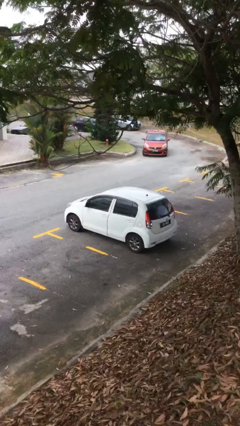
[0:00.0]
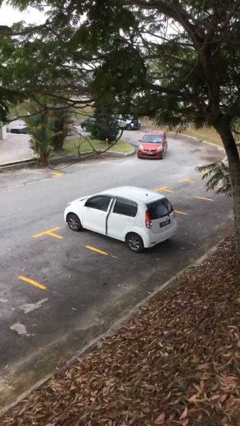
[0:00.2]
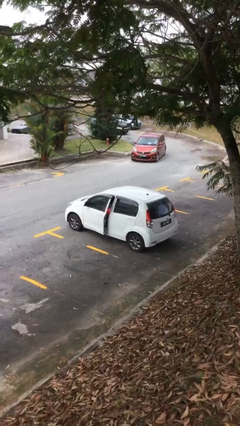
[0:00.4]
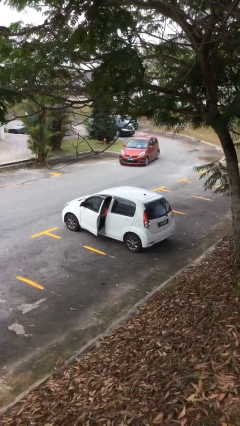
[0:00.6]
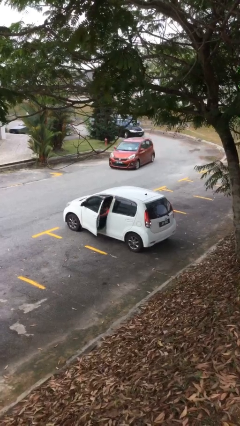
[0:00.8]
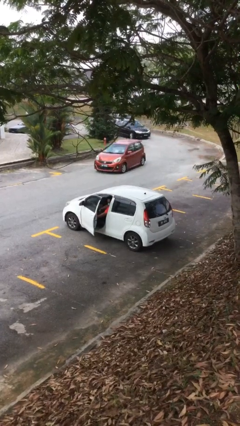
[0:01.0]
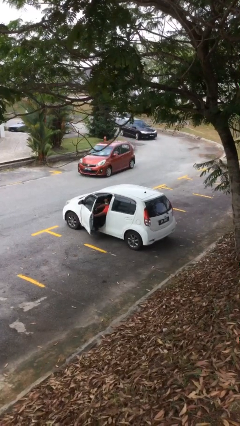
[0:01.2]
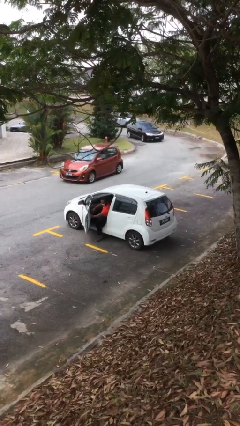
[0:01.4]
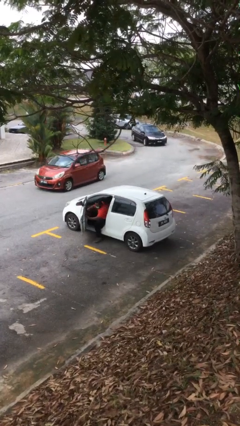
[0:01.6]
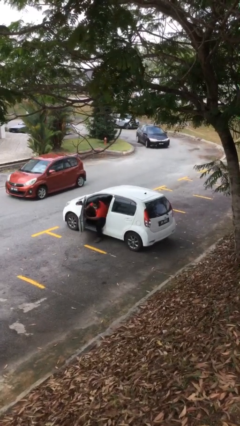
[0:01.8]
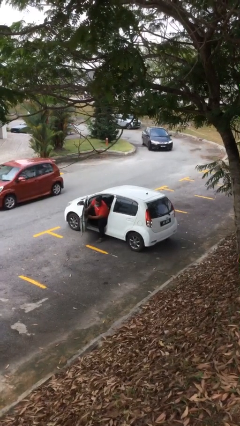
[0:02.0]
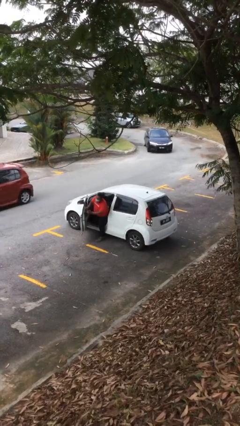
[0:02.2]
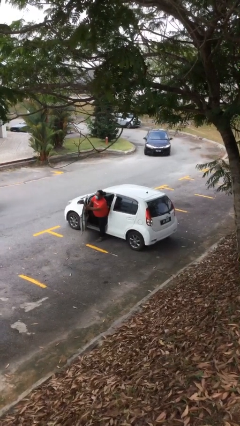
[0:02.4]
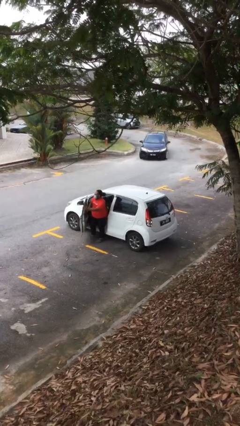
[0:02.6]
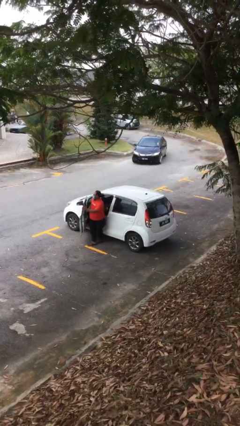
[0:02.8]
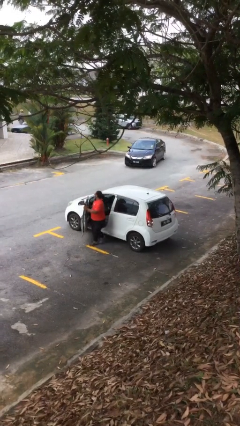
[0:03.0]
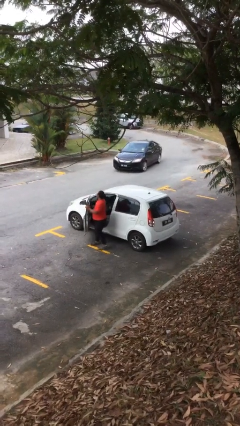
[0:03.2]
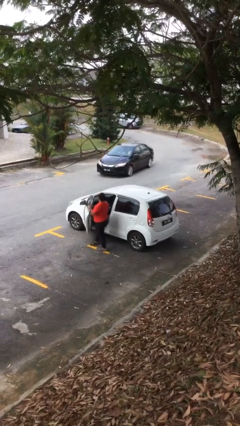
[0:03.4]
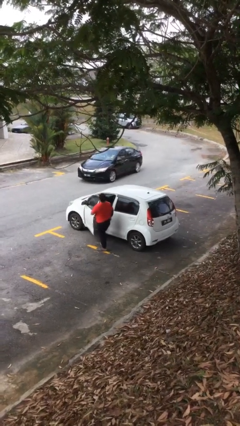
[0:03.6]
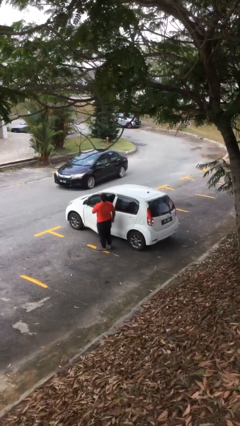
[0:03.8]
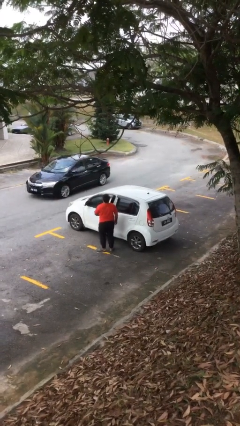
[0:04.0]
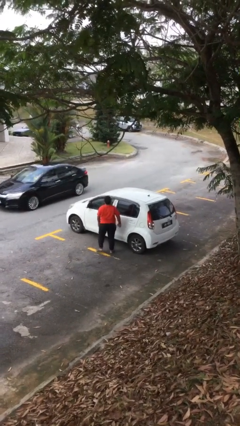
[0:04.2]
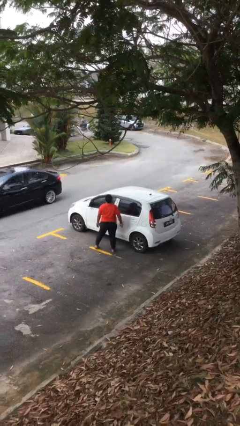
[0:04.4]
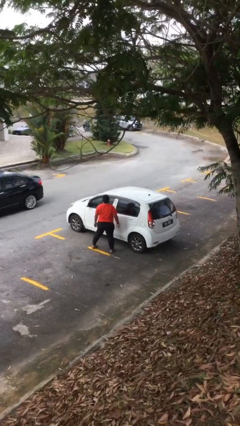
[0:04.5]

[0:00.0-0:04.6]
car drops off person

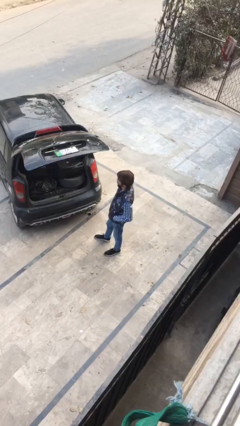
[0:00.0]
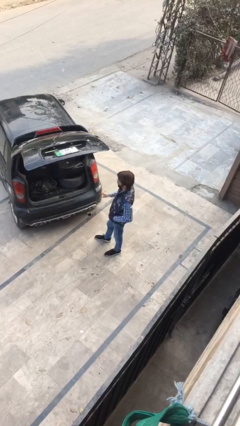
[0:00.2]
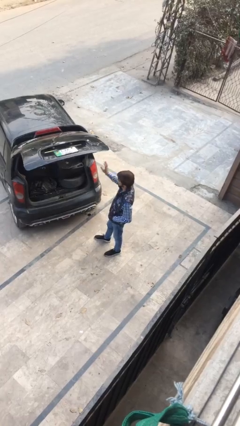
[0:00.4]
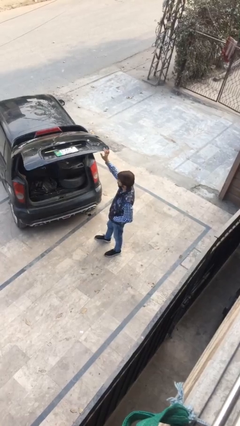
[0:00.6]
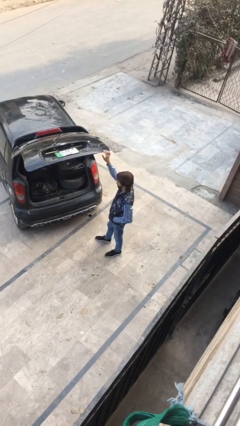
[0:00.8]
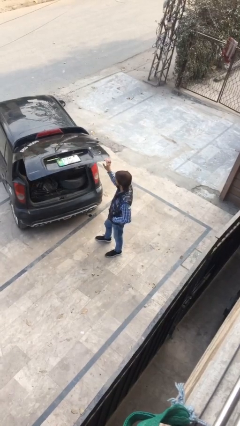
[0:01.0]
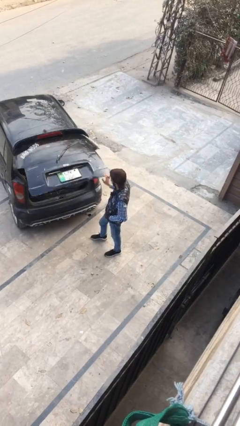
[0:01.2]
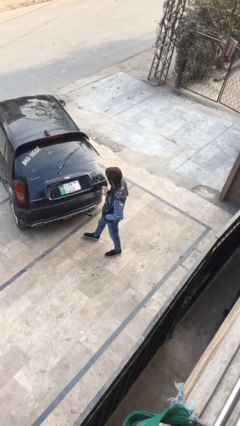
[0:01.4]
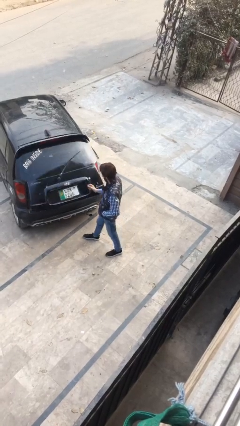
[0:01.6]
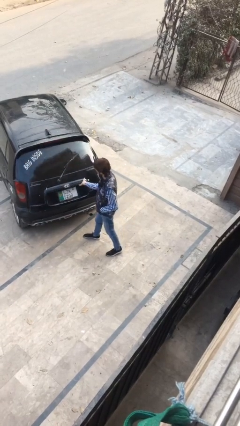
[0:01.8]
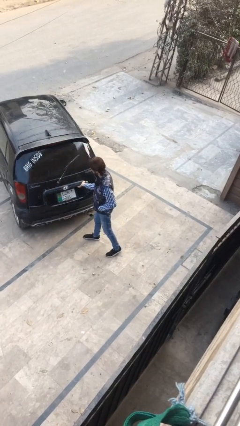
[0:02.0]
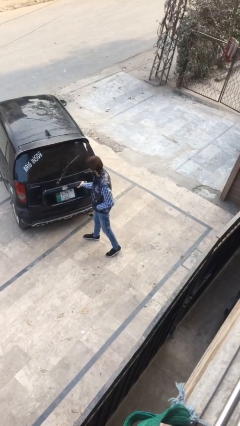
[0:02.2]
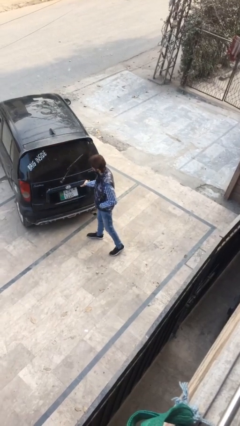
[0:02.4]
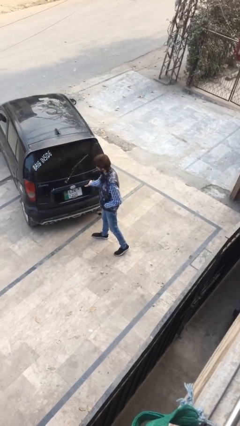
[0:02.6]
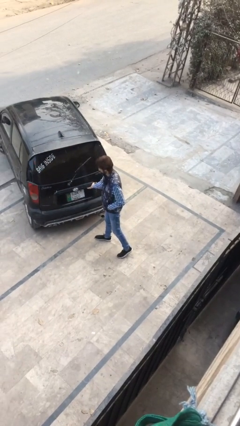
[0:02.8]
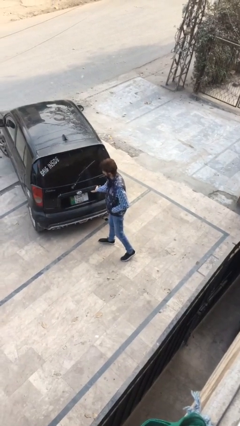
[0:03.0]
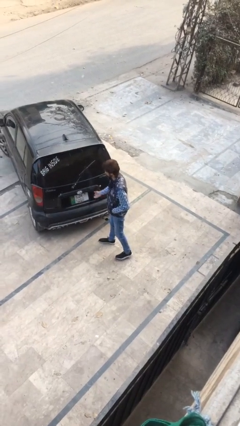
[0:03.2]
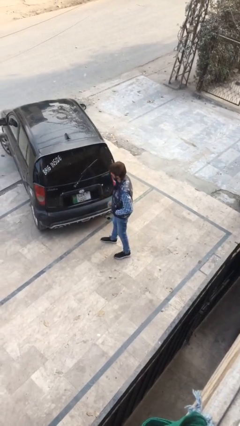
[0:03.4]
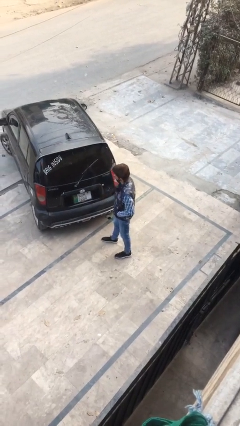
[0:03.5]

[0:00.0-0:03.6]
person closes car trunk

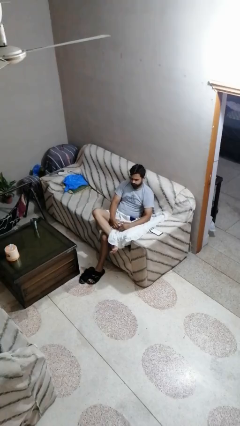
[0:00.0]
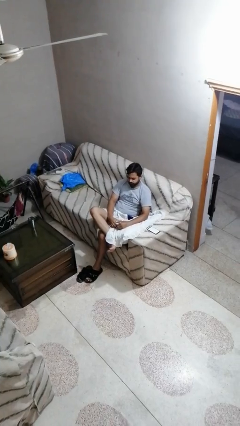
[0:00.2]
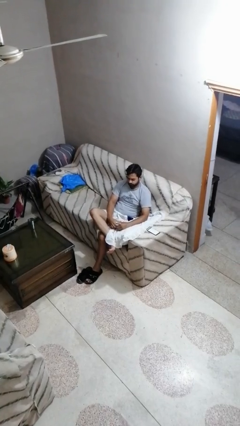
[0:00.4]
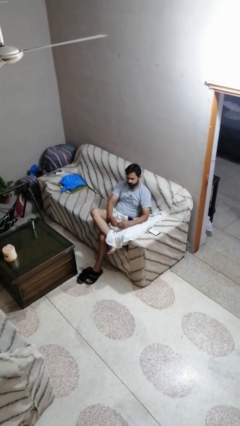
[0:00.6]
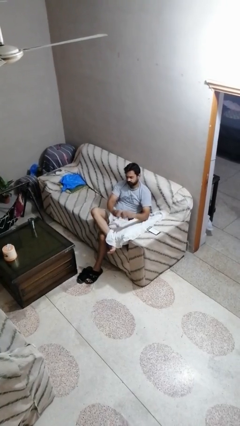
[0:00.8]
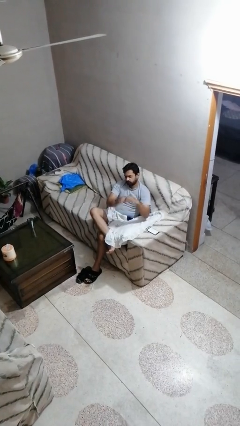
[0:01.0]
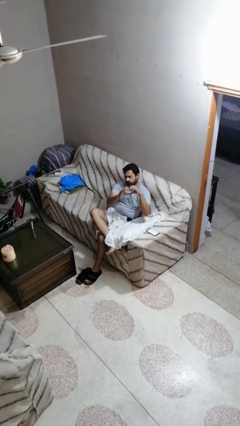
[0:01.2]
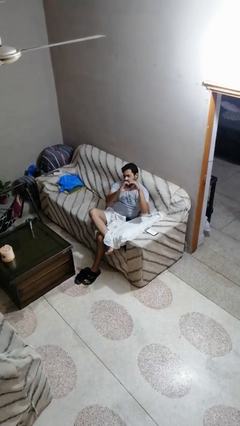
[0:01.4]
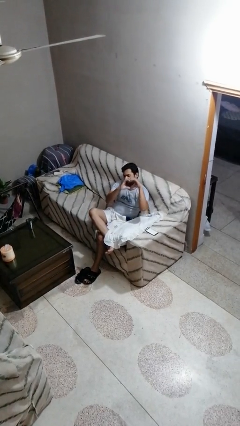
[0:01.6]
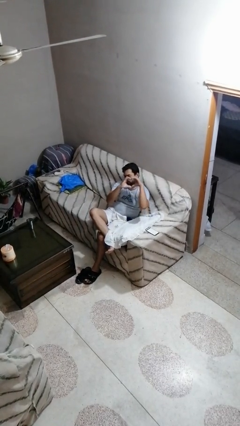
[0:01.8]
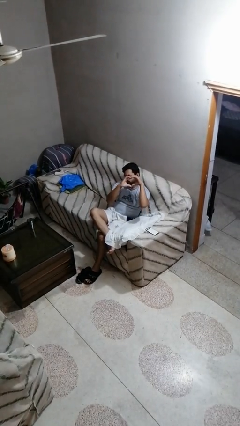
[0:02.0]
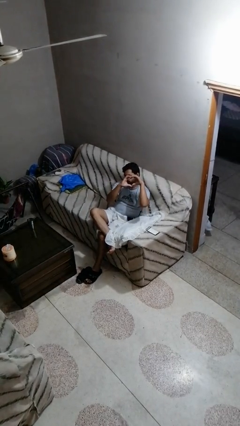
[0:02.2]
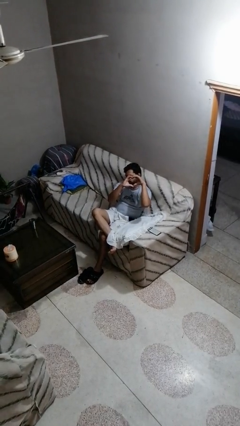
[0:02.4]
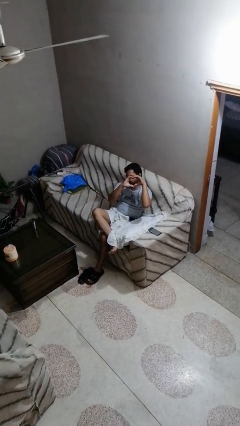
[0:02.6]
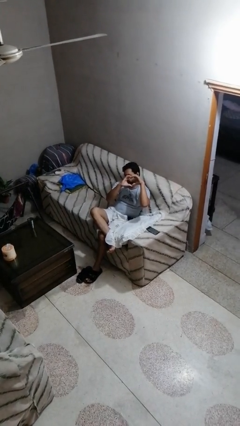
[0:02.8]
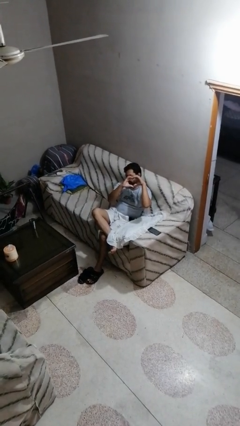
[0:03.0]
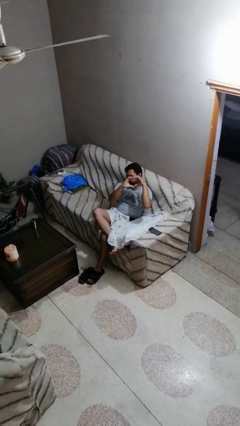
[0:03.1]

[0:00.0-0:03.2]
person gestures heart

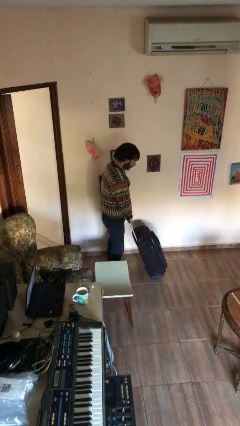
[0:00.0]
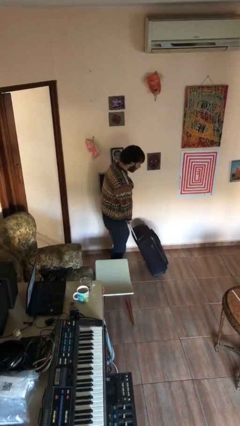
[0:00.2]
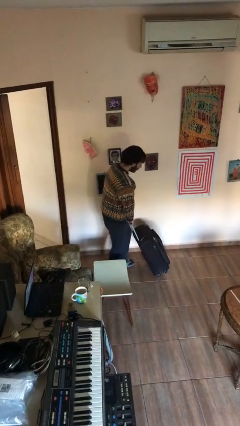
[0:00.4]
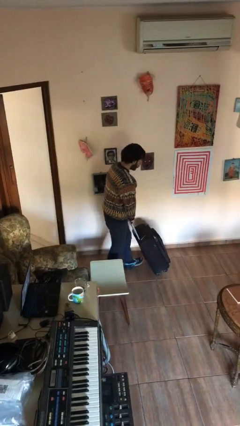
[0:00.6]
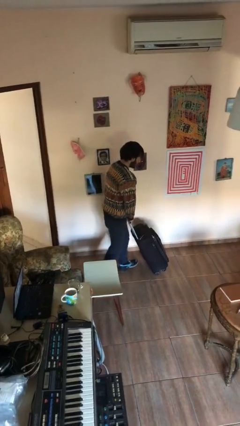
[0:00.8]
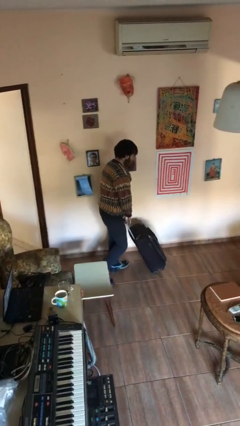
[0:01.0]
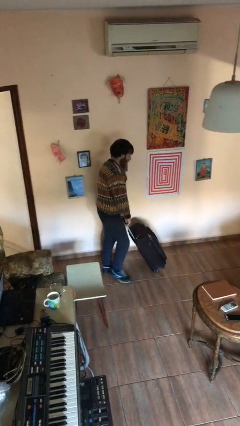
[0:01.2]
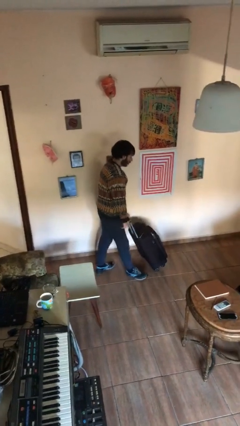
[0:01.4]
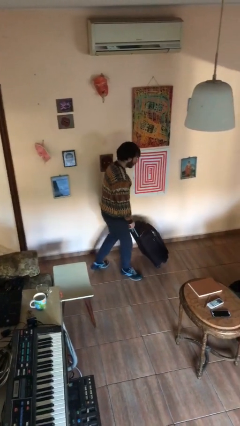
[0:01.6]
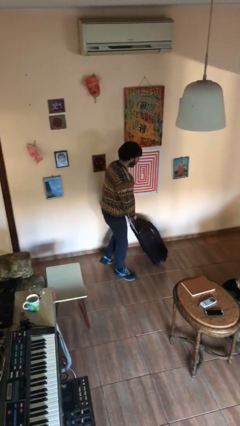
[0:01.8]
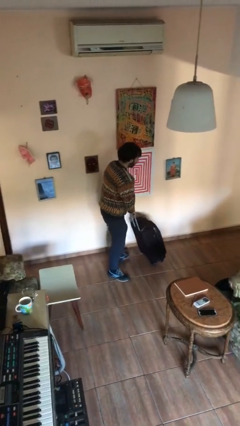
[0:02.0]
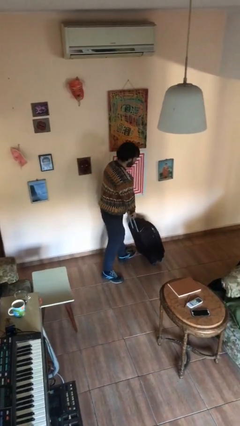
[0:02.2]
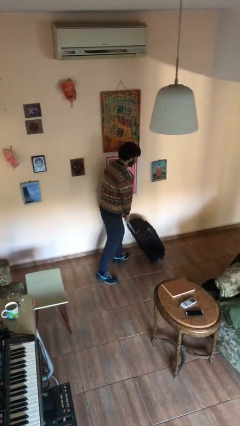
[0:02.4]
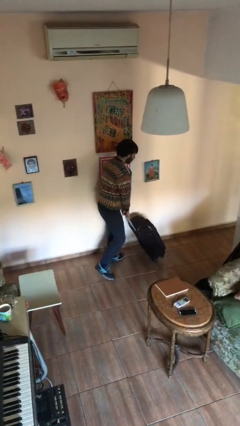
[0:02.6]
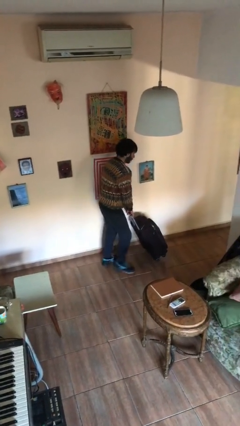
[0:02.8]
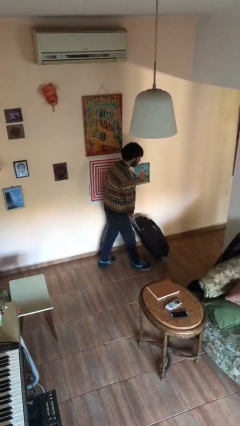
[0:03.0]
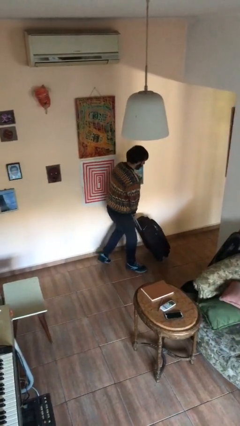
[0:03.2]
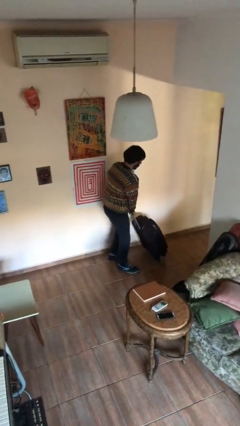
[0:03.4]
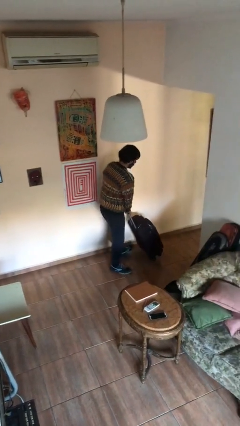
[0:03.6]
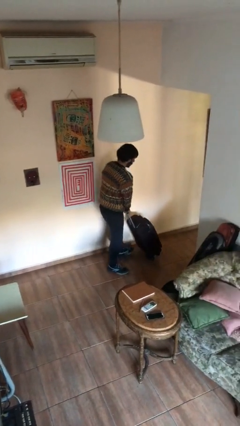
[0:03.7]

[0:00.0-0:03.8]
person pushes wheeled cart

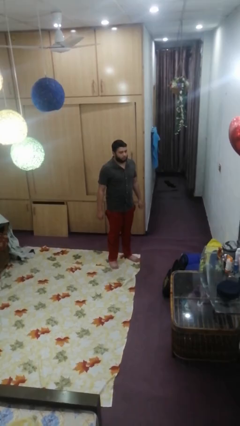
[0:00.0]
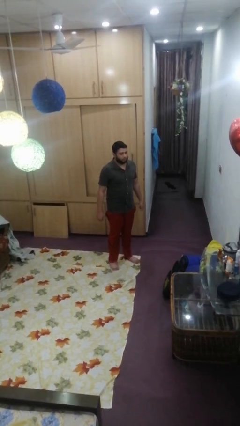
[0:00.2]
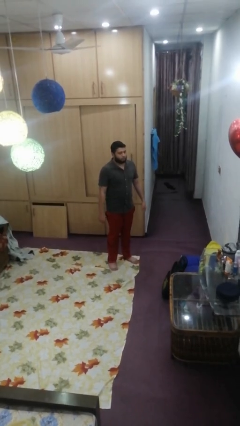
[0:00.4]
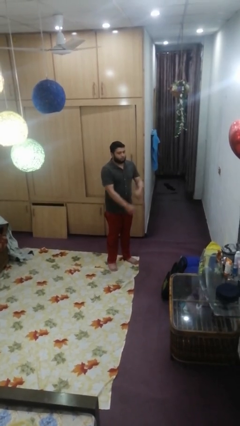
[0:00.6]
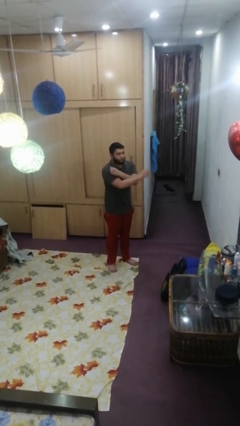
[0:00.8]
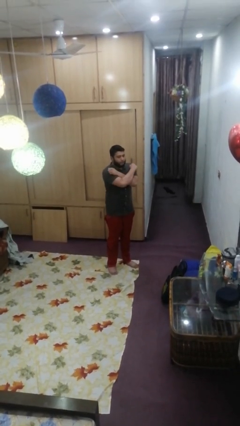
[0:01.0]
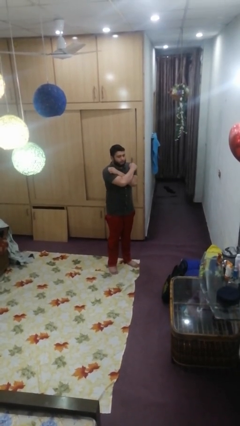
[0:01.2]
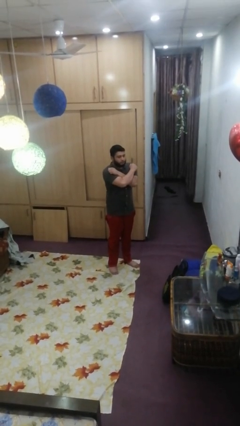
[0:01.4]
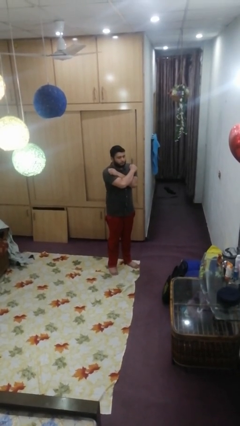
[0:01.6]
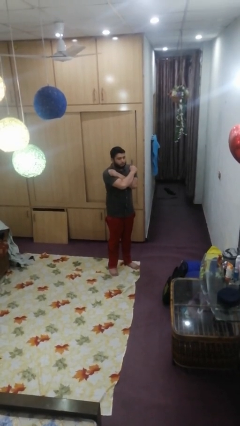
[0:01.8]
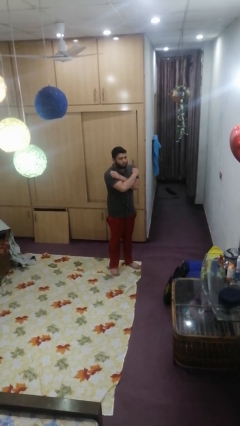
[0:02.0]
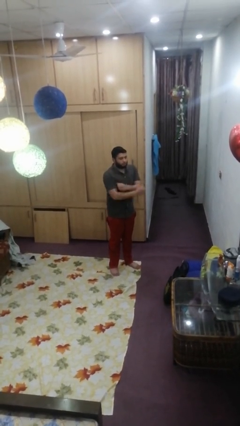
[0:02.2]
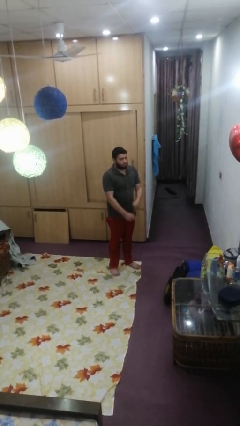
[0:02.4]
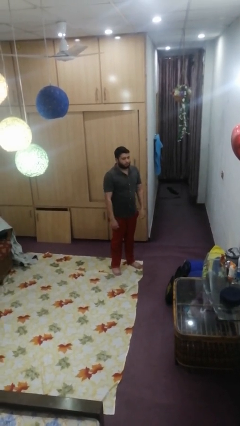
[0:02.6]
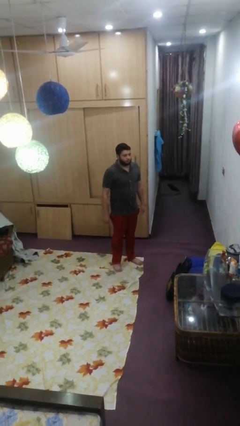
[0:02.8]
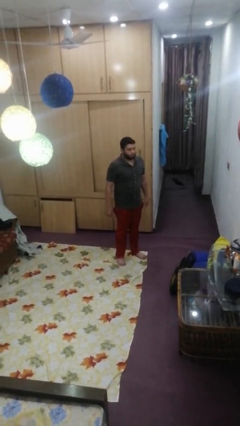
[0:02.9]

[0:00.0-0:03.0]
person crosses arms
